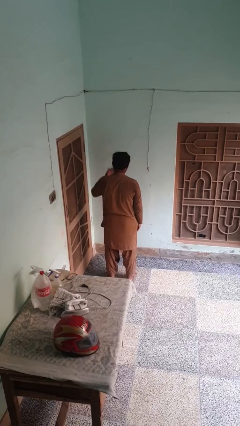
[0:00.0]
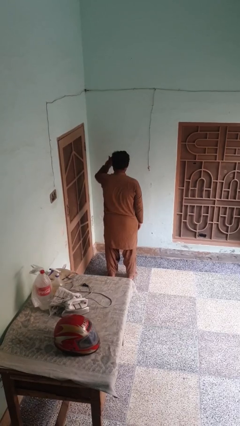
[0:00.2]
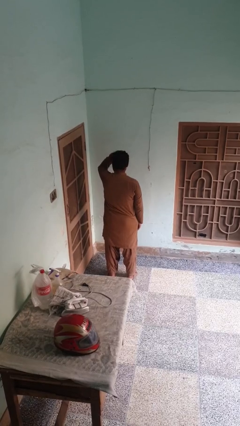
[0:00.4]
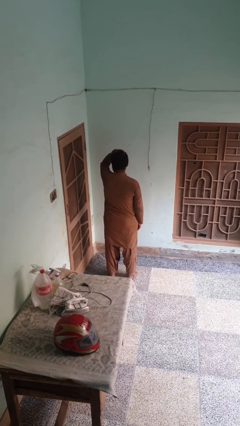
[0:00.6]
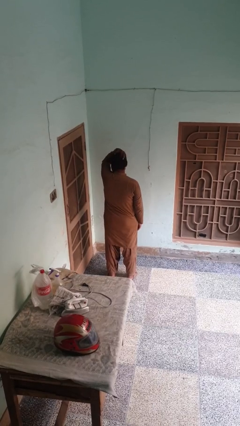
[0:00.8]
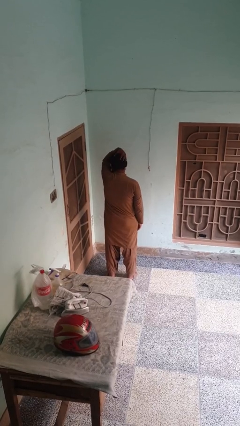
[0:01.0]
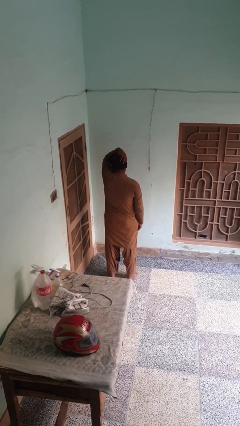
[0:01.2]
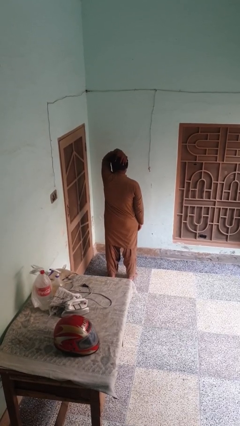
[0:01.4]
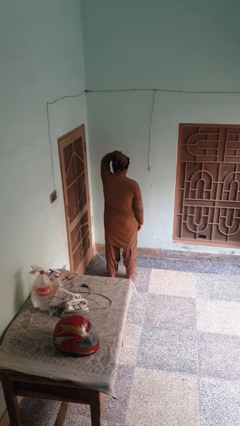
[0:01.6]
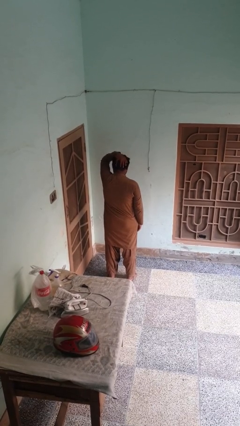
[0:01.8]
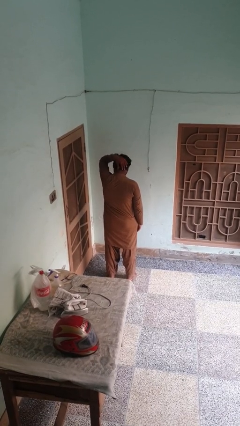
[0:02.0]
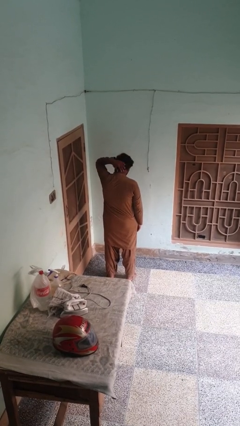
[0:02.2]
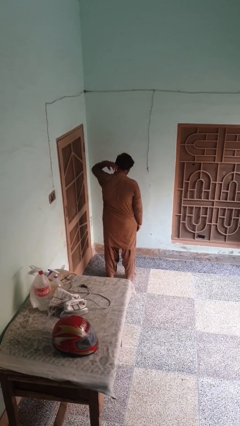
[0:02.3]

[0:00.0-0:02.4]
person strokes hair

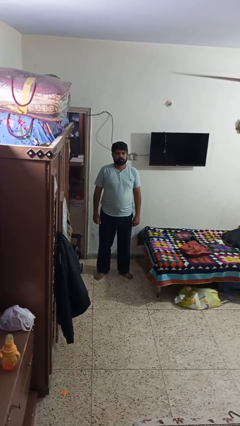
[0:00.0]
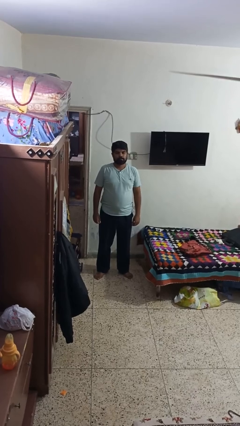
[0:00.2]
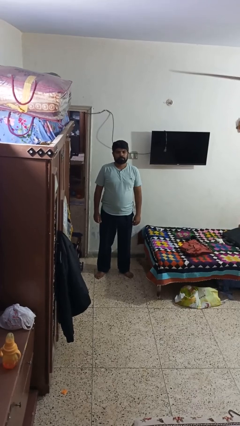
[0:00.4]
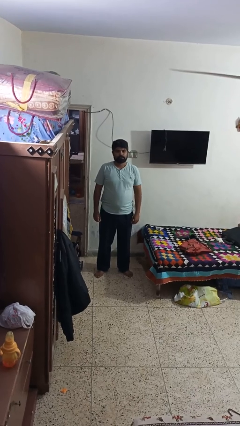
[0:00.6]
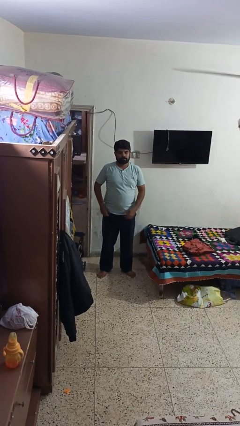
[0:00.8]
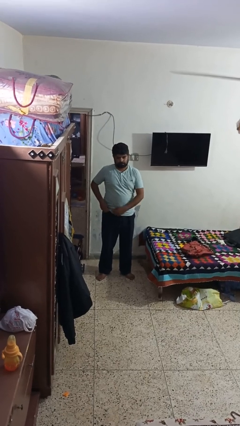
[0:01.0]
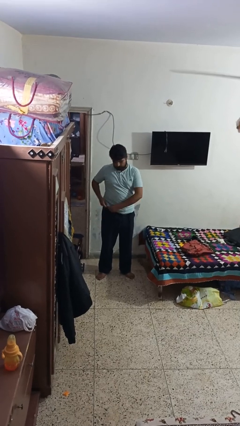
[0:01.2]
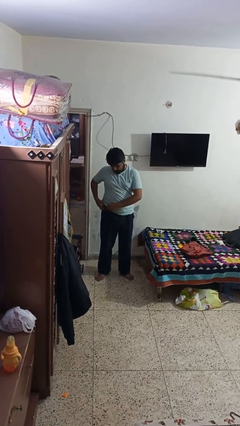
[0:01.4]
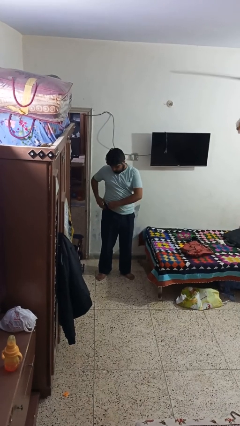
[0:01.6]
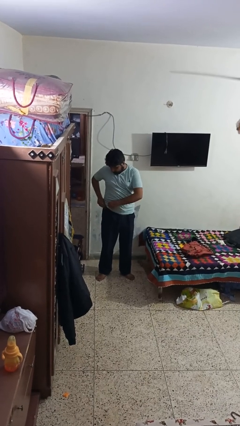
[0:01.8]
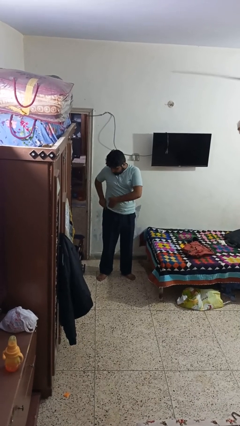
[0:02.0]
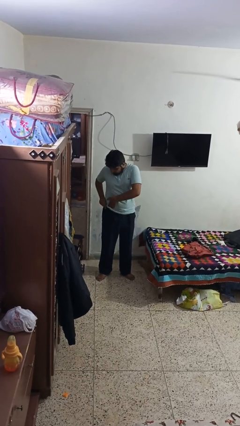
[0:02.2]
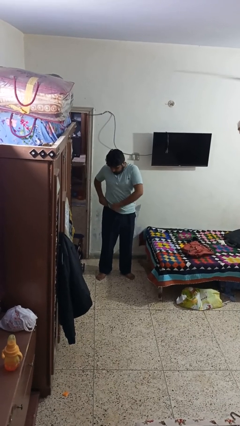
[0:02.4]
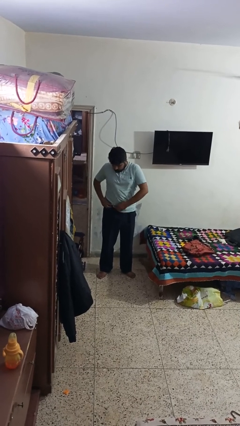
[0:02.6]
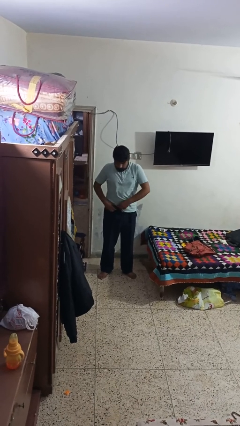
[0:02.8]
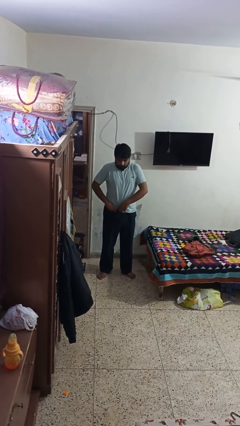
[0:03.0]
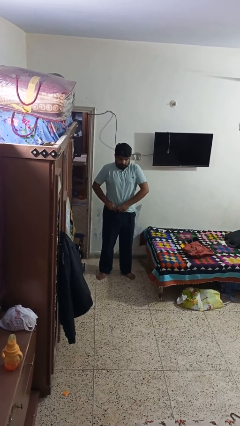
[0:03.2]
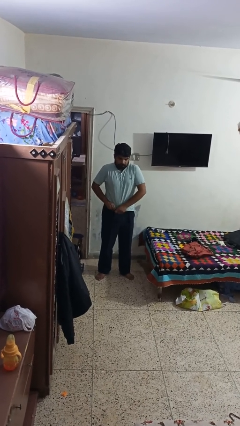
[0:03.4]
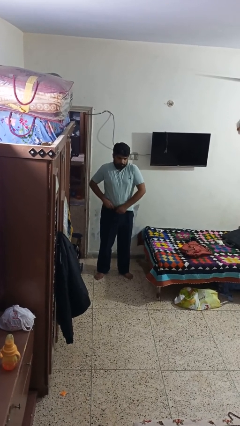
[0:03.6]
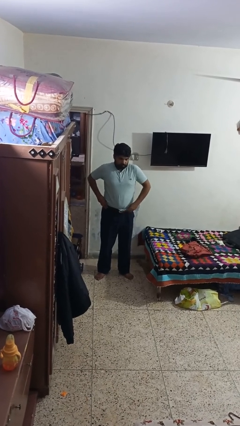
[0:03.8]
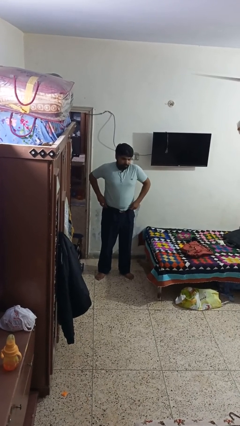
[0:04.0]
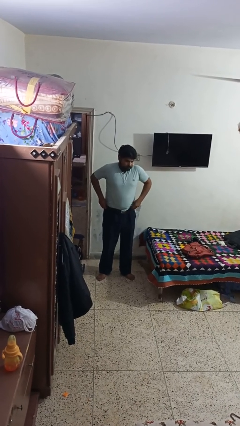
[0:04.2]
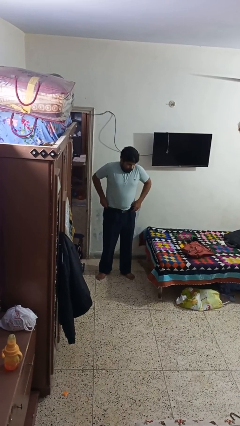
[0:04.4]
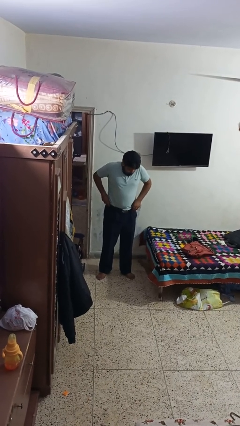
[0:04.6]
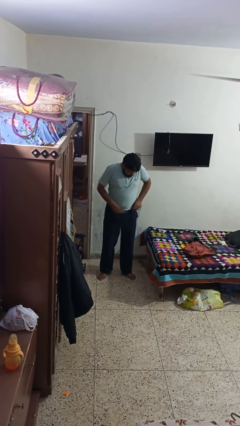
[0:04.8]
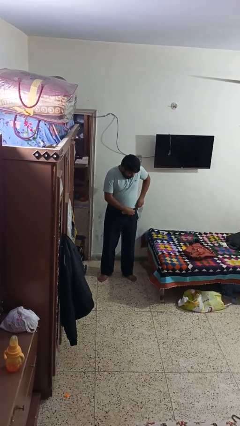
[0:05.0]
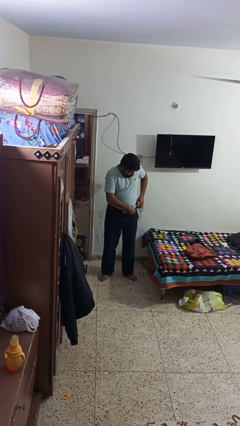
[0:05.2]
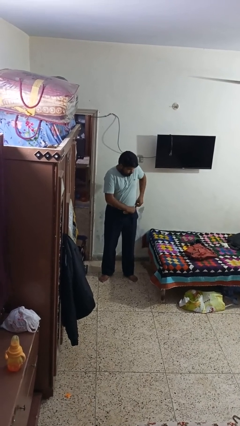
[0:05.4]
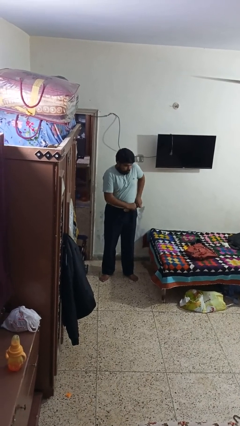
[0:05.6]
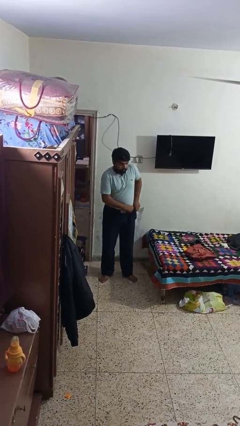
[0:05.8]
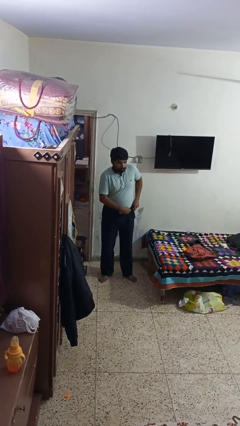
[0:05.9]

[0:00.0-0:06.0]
person tucks in shirt

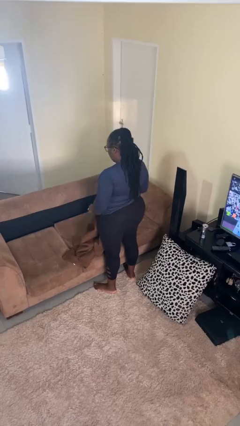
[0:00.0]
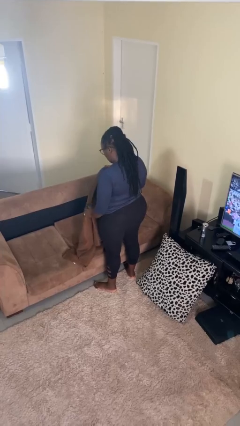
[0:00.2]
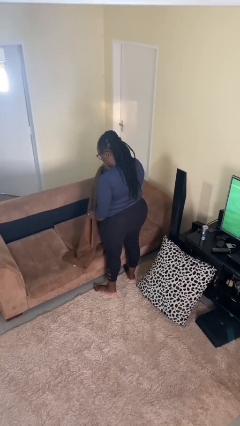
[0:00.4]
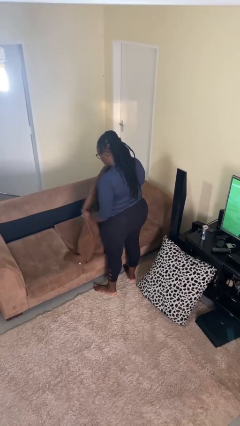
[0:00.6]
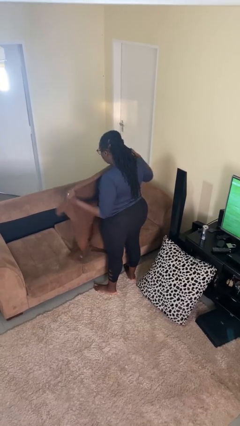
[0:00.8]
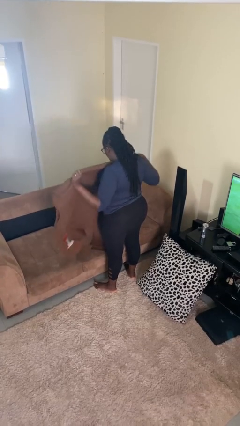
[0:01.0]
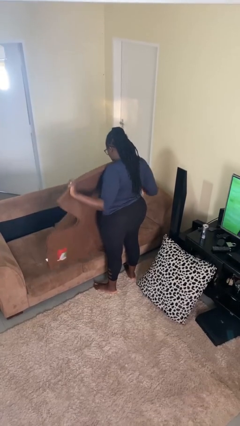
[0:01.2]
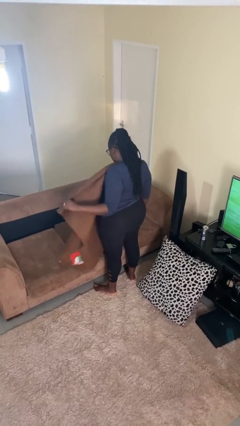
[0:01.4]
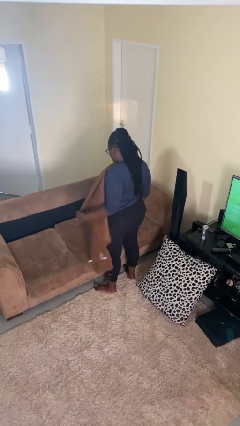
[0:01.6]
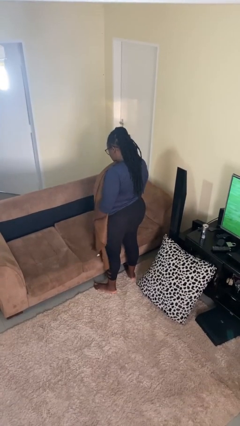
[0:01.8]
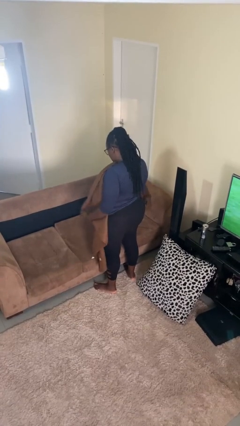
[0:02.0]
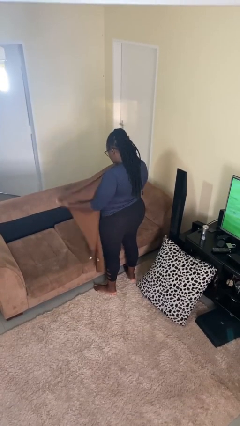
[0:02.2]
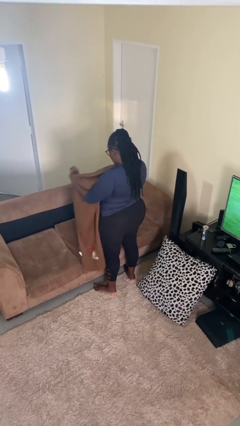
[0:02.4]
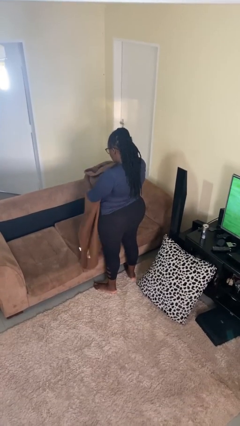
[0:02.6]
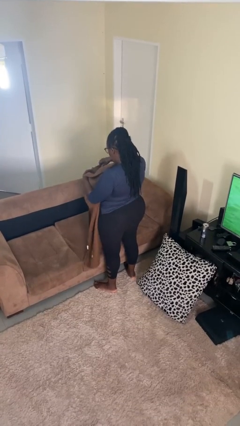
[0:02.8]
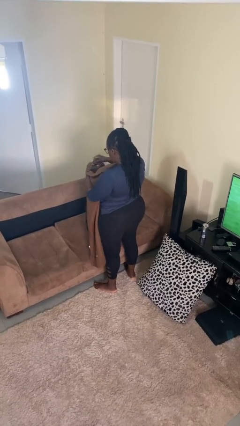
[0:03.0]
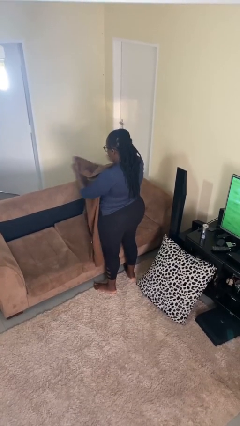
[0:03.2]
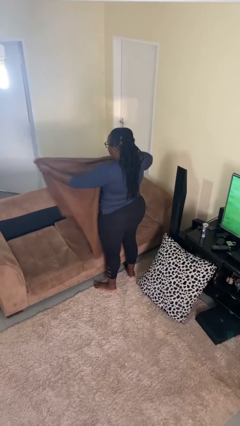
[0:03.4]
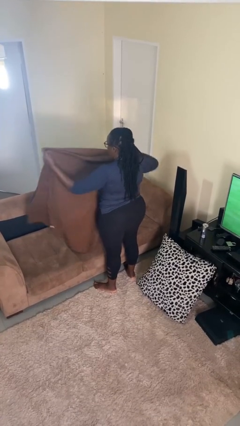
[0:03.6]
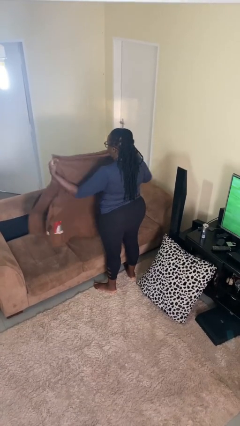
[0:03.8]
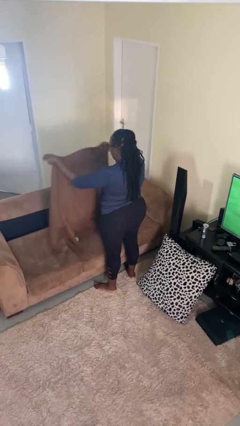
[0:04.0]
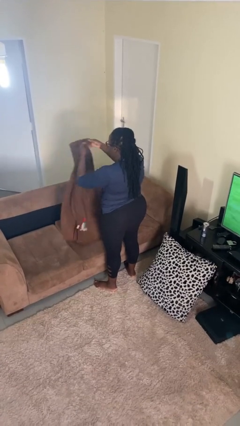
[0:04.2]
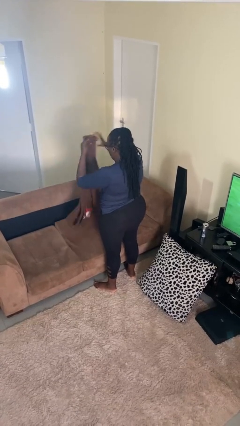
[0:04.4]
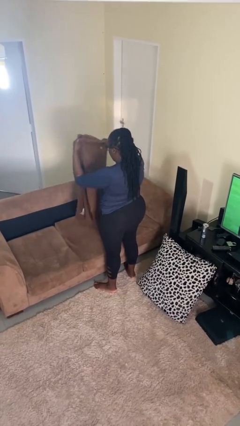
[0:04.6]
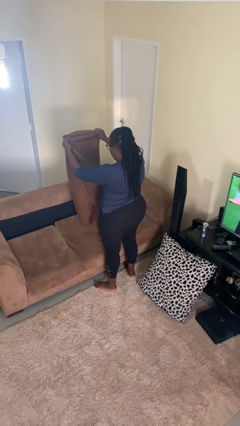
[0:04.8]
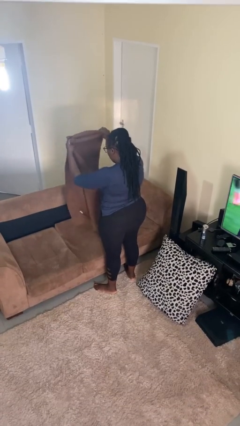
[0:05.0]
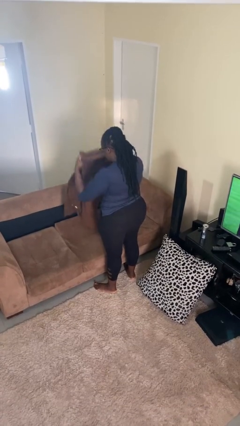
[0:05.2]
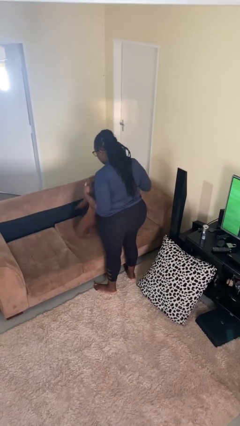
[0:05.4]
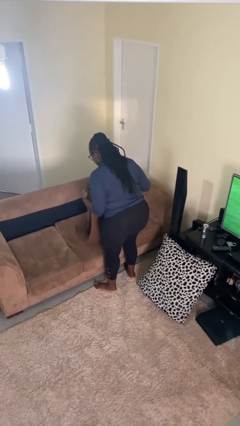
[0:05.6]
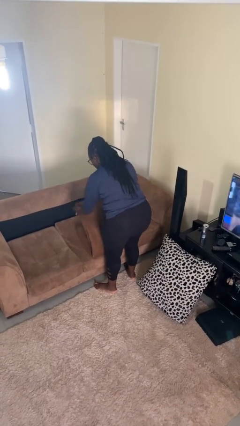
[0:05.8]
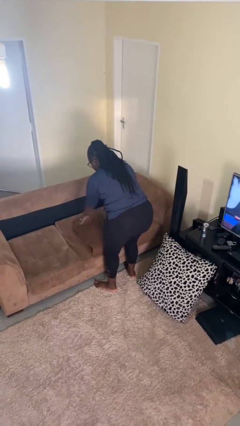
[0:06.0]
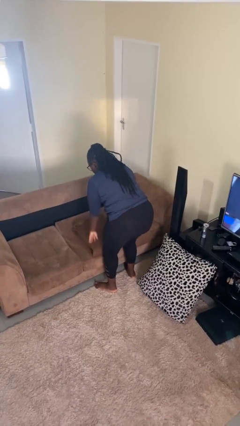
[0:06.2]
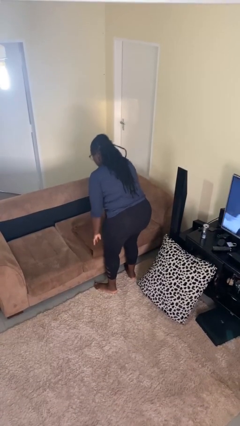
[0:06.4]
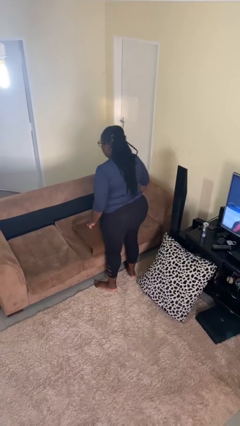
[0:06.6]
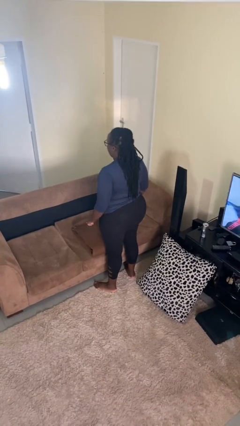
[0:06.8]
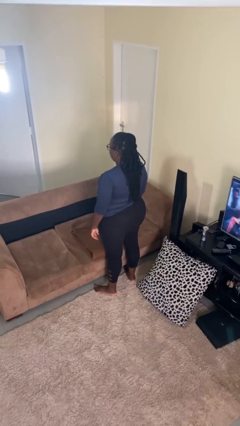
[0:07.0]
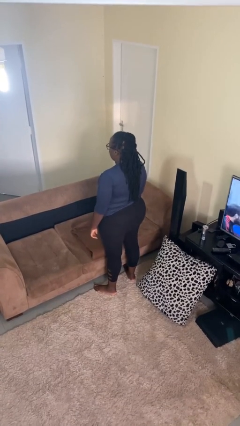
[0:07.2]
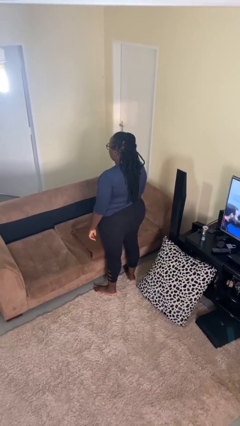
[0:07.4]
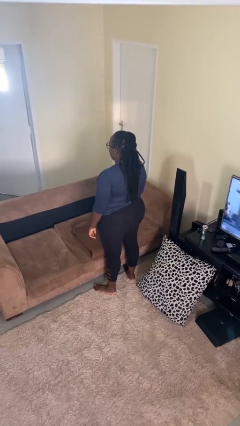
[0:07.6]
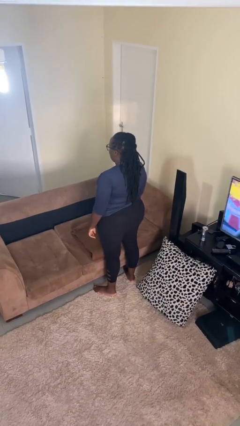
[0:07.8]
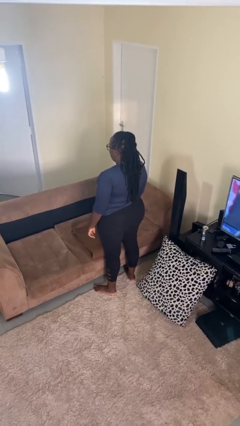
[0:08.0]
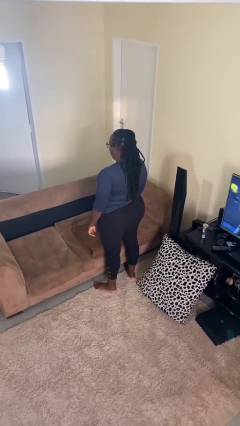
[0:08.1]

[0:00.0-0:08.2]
person folds blanket

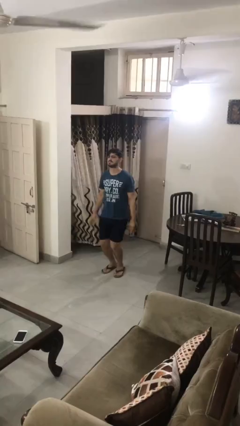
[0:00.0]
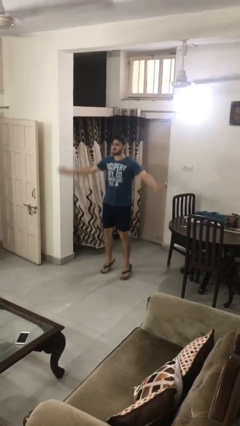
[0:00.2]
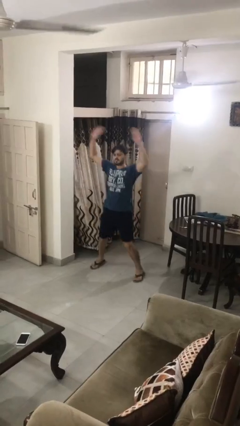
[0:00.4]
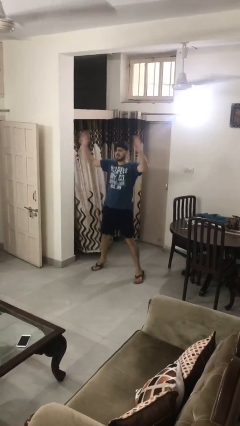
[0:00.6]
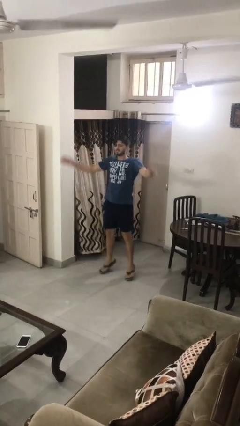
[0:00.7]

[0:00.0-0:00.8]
person exercises with jumping jacks
